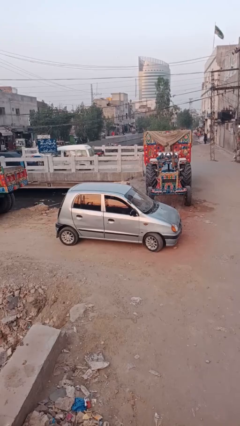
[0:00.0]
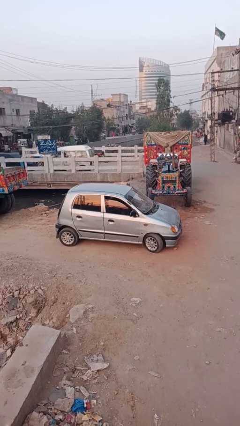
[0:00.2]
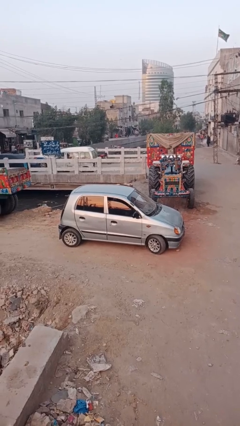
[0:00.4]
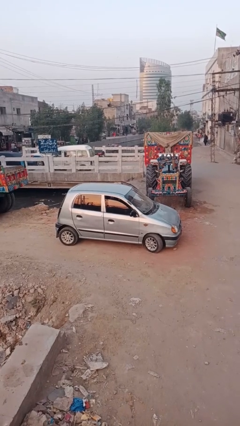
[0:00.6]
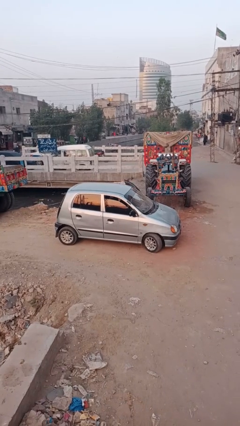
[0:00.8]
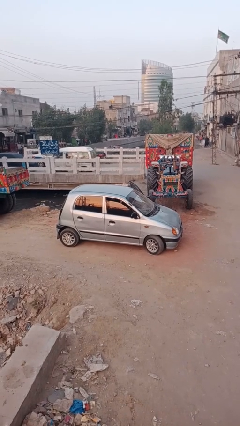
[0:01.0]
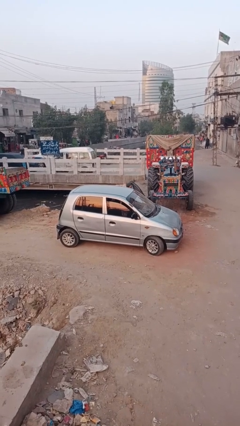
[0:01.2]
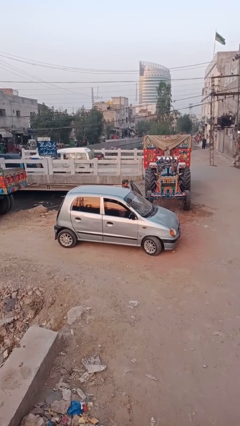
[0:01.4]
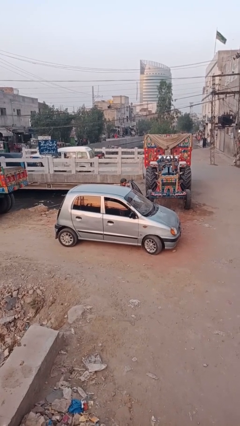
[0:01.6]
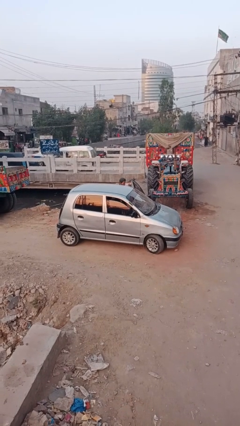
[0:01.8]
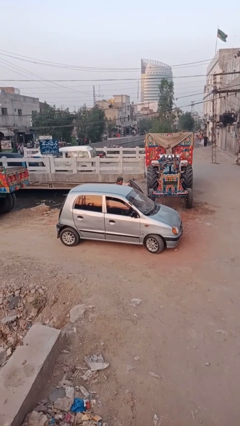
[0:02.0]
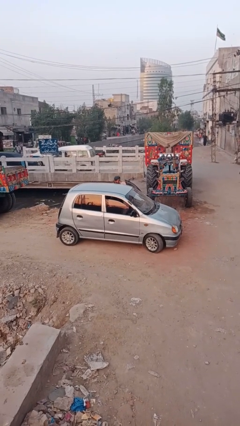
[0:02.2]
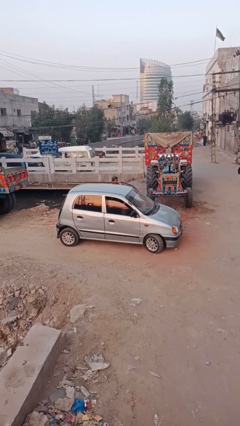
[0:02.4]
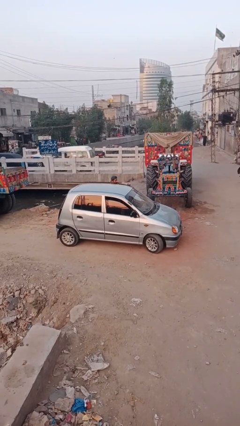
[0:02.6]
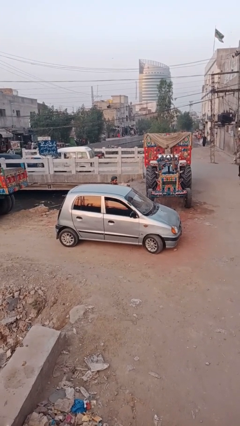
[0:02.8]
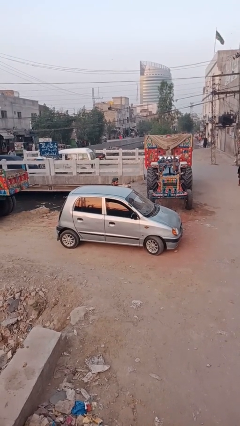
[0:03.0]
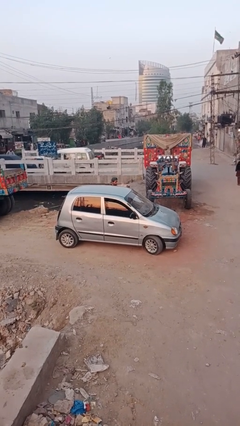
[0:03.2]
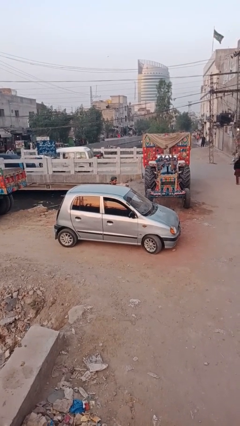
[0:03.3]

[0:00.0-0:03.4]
car drops off person

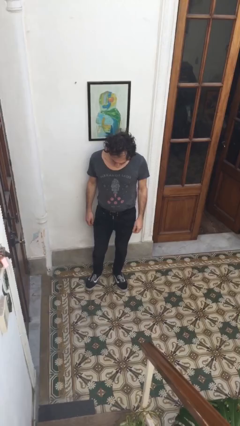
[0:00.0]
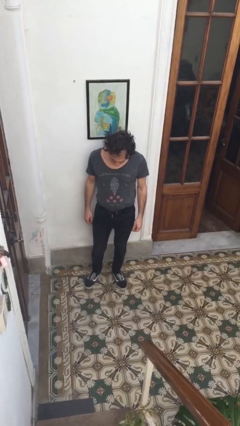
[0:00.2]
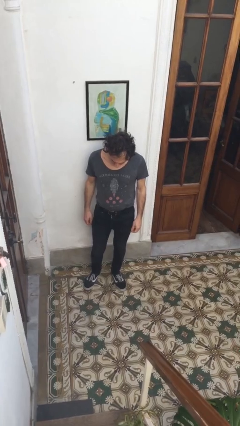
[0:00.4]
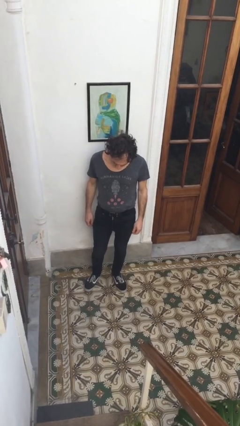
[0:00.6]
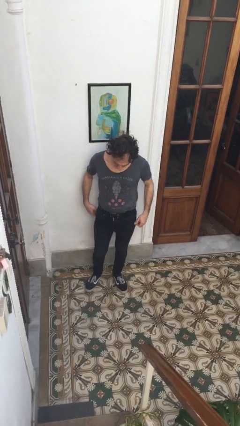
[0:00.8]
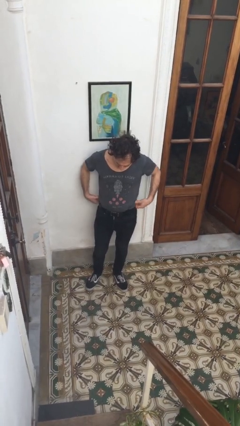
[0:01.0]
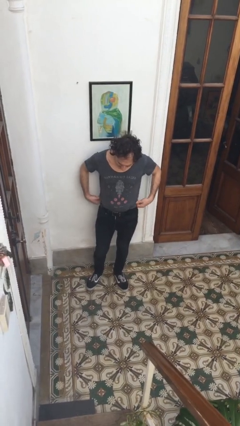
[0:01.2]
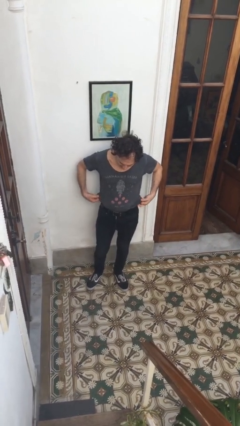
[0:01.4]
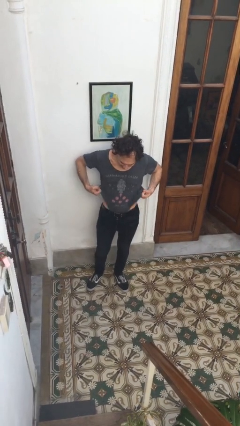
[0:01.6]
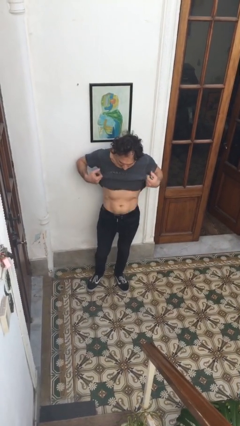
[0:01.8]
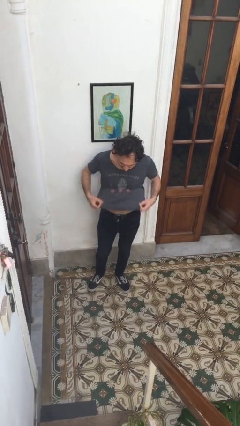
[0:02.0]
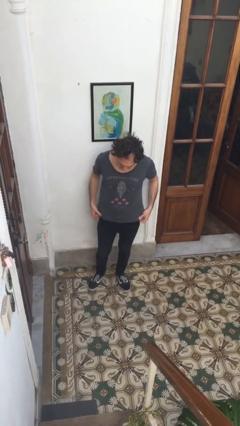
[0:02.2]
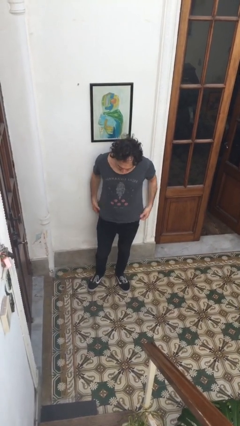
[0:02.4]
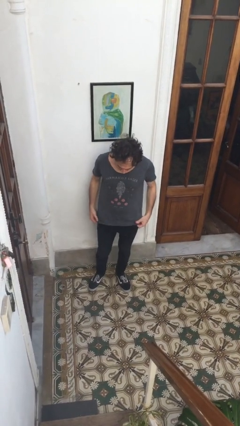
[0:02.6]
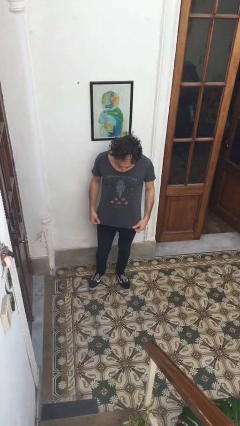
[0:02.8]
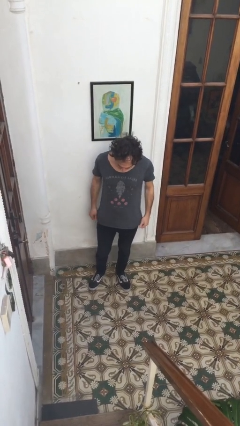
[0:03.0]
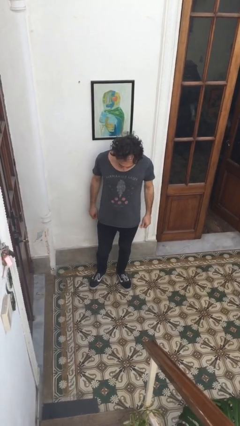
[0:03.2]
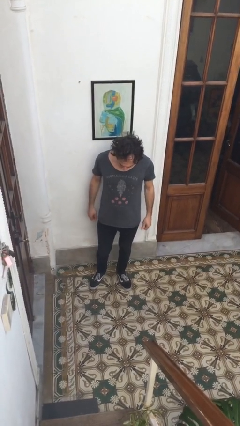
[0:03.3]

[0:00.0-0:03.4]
person untucks shirt

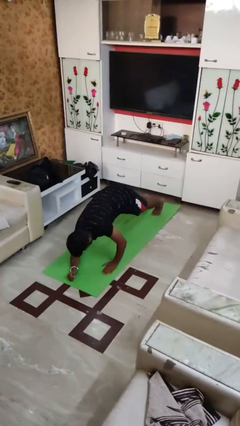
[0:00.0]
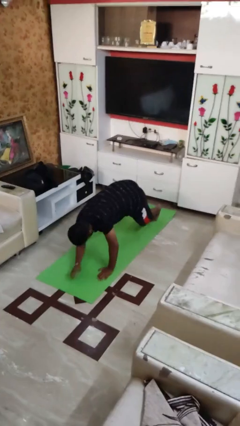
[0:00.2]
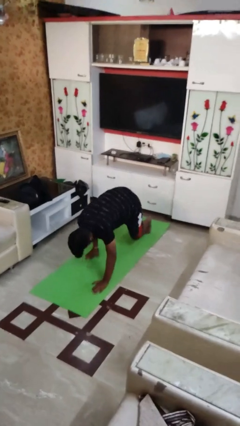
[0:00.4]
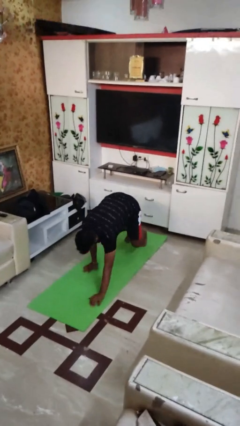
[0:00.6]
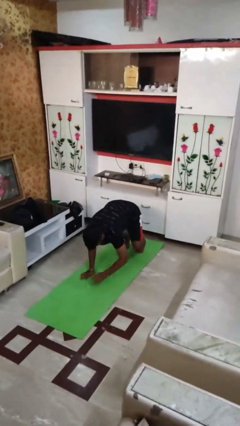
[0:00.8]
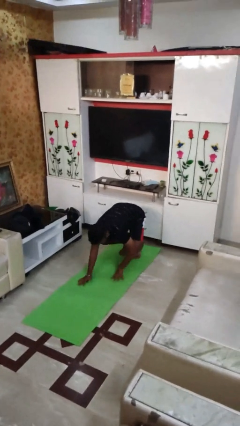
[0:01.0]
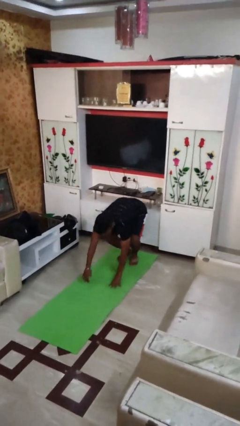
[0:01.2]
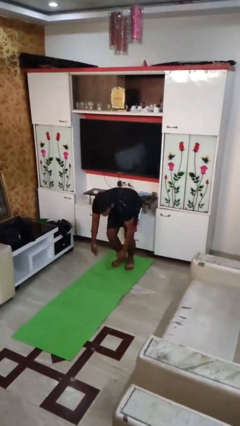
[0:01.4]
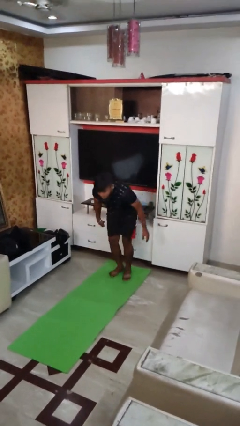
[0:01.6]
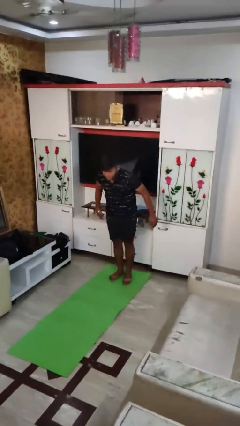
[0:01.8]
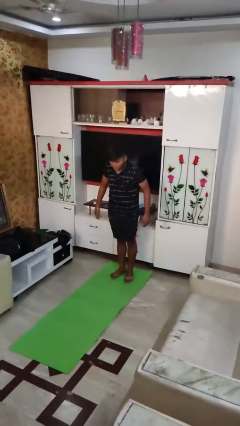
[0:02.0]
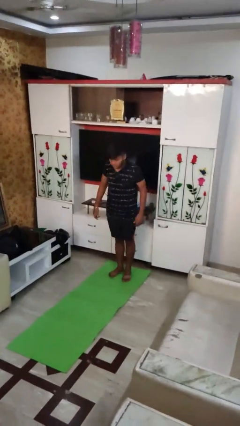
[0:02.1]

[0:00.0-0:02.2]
person stands up from floor

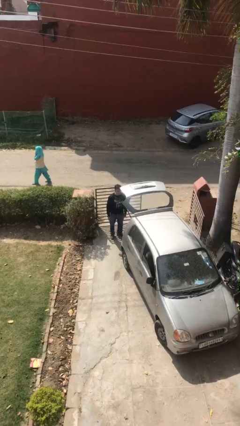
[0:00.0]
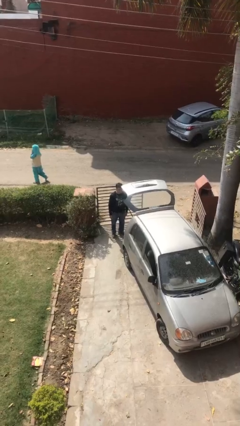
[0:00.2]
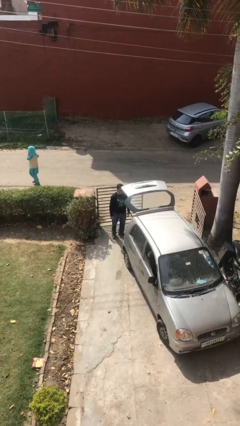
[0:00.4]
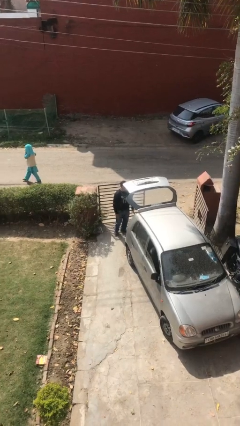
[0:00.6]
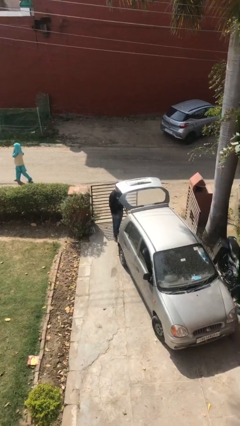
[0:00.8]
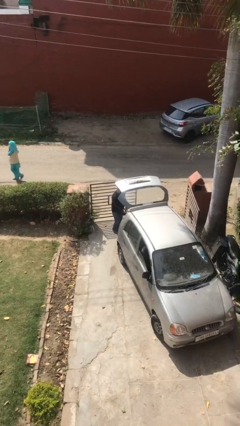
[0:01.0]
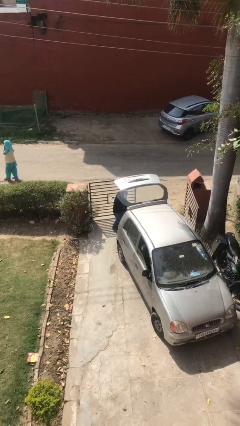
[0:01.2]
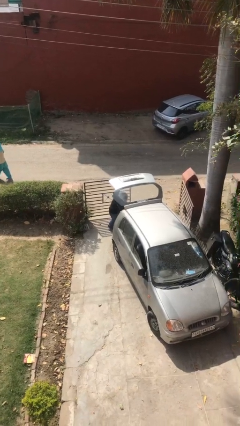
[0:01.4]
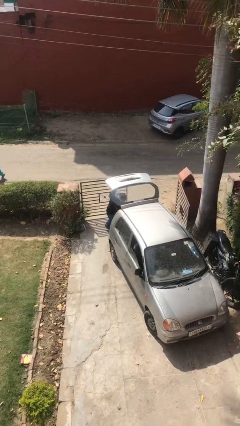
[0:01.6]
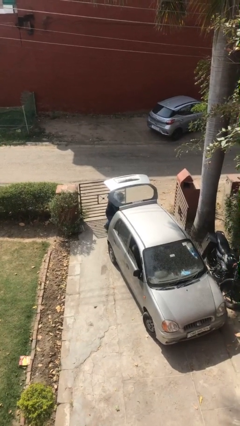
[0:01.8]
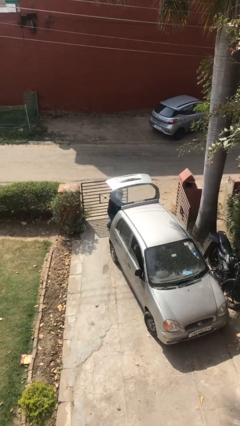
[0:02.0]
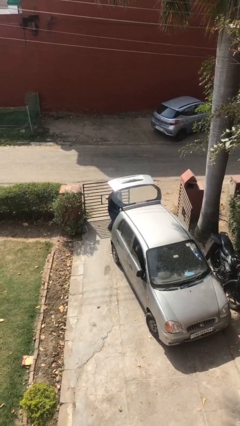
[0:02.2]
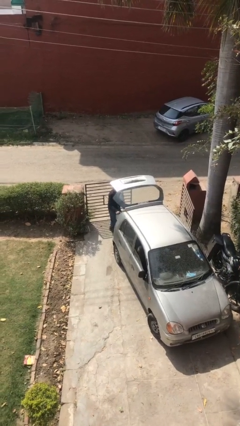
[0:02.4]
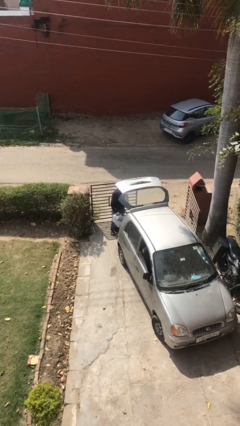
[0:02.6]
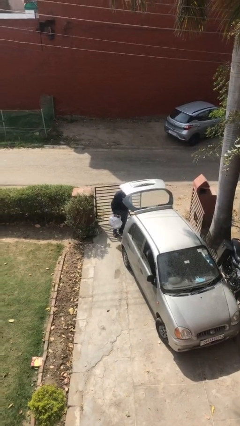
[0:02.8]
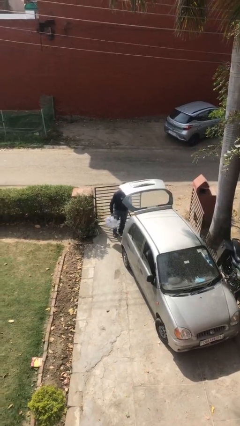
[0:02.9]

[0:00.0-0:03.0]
person unloads car

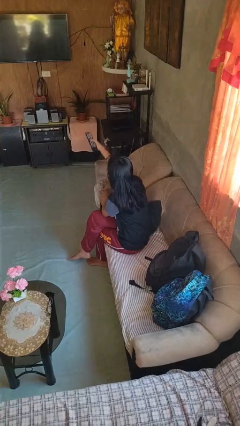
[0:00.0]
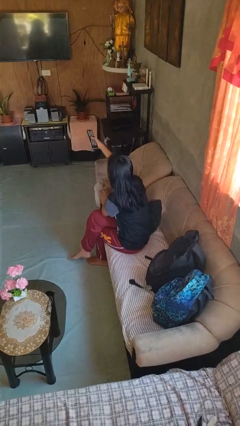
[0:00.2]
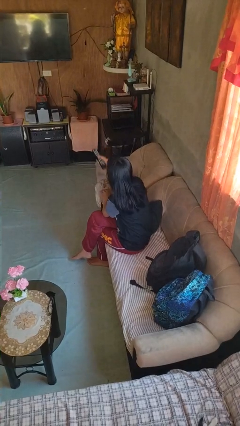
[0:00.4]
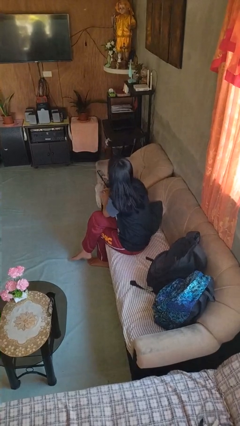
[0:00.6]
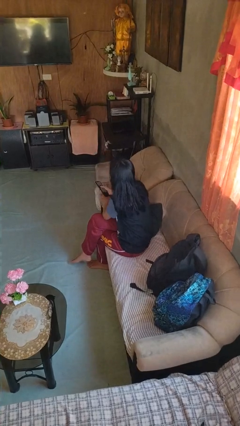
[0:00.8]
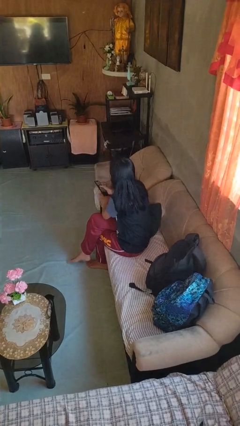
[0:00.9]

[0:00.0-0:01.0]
person uses television remote

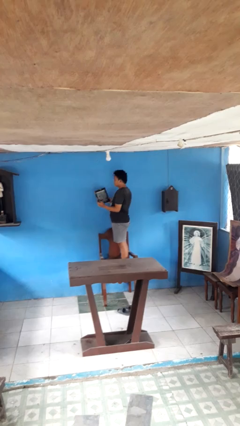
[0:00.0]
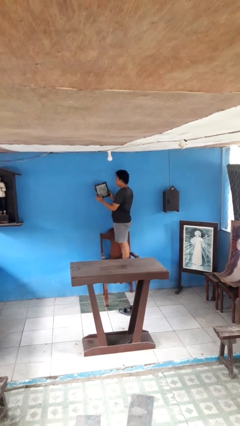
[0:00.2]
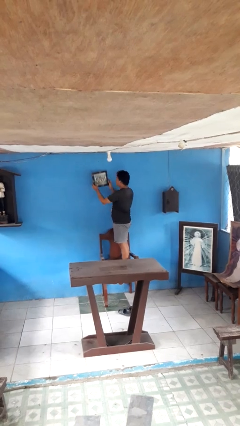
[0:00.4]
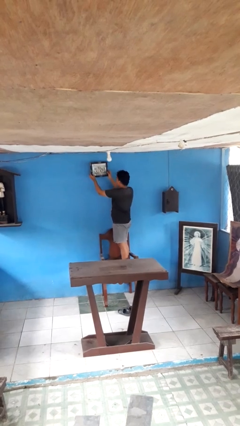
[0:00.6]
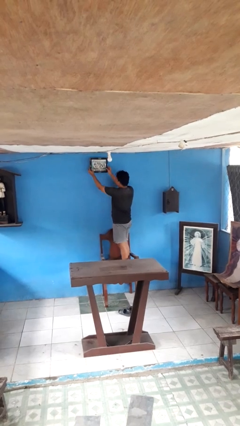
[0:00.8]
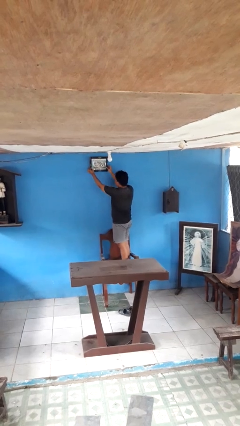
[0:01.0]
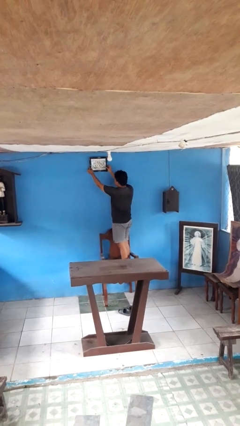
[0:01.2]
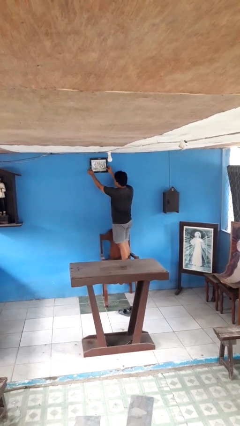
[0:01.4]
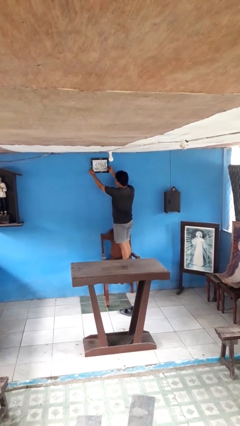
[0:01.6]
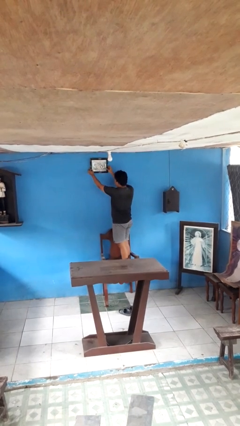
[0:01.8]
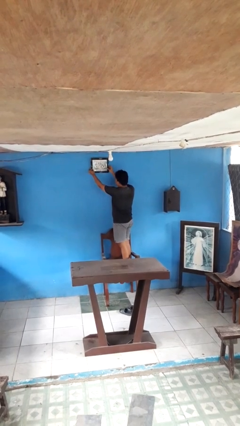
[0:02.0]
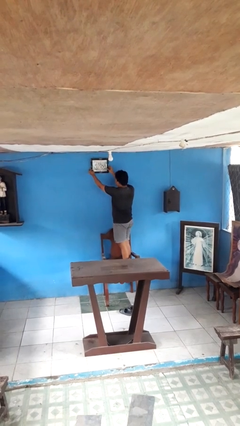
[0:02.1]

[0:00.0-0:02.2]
person puts up picture frame

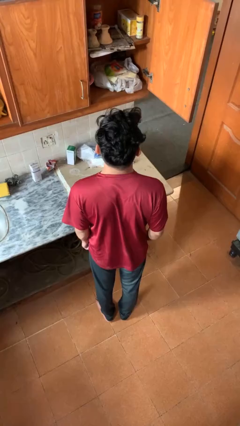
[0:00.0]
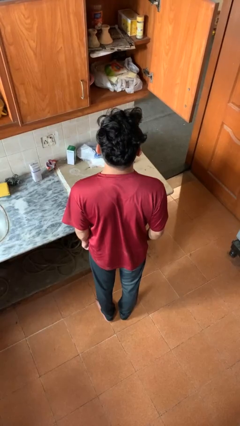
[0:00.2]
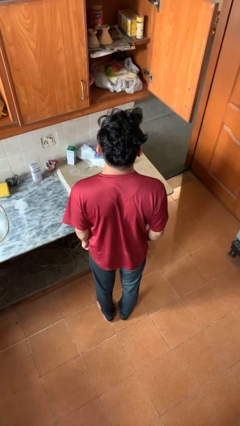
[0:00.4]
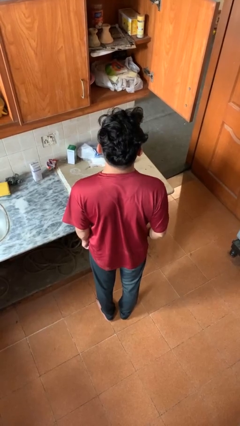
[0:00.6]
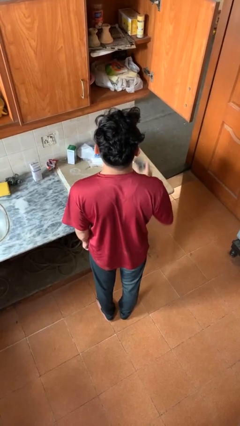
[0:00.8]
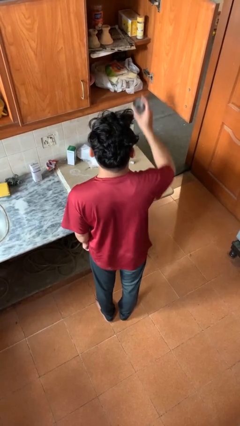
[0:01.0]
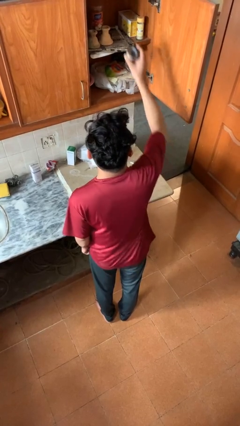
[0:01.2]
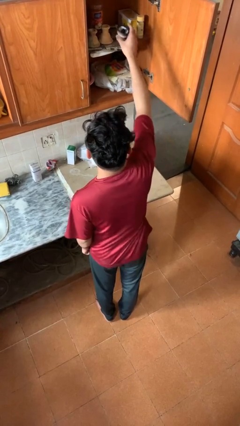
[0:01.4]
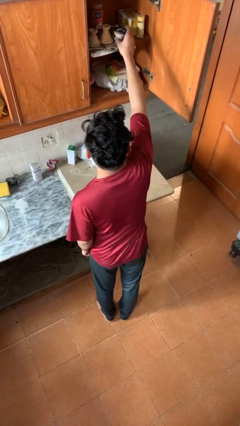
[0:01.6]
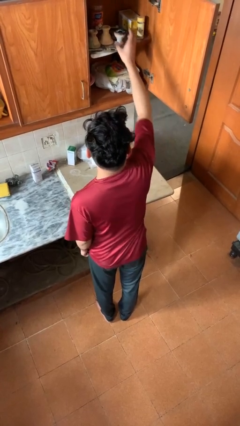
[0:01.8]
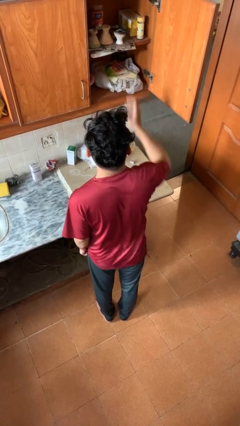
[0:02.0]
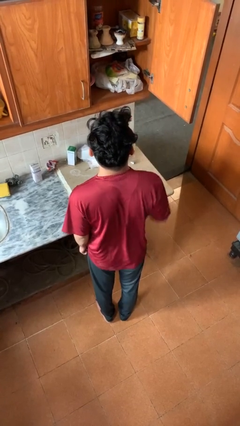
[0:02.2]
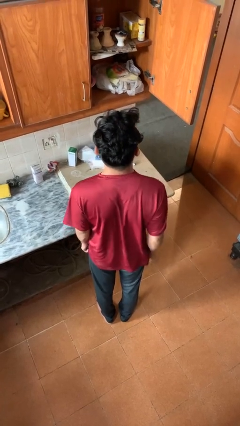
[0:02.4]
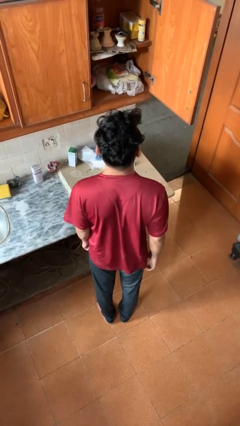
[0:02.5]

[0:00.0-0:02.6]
person puts object in cabinet
